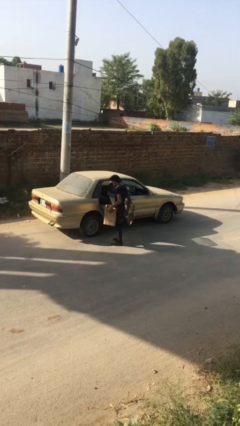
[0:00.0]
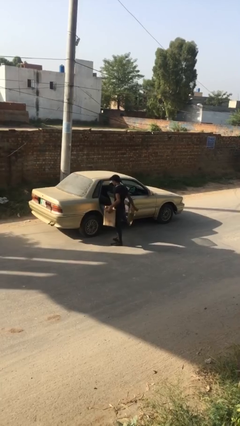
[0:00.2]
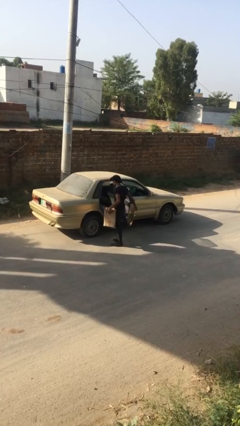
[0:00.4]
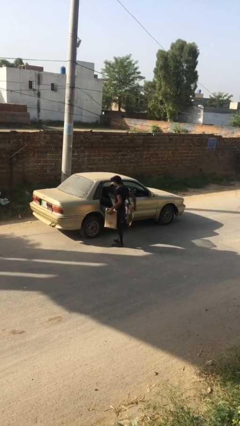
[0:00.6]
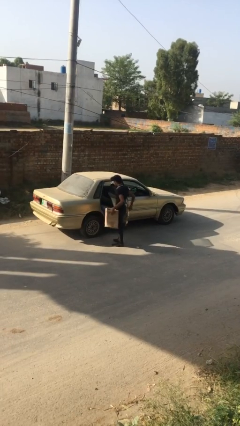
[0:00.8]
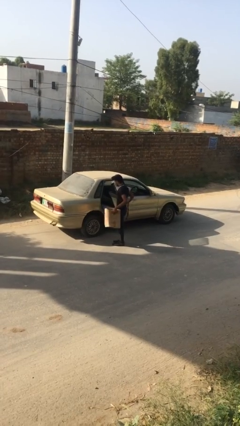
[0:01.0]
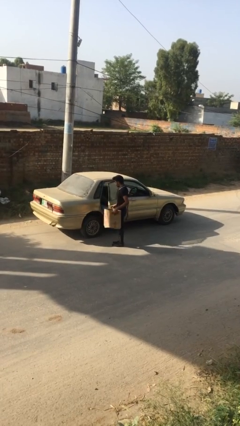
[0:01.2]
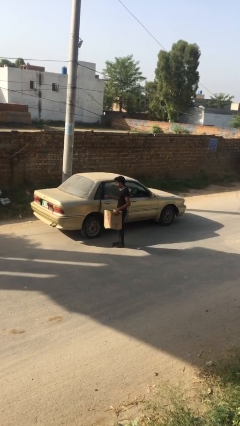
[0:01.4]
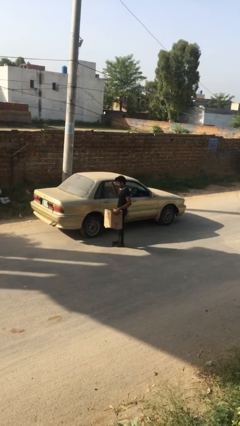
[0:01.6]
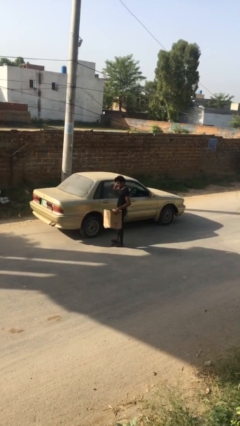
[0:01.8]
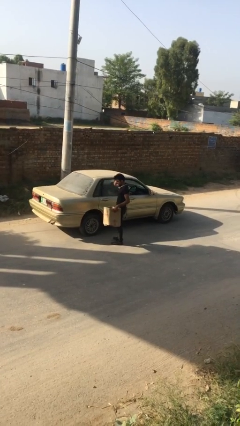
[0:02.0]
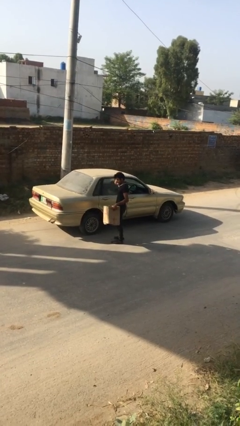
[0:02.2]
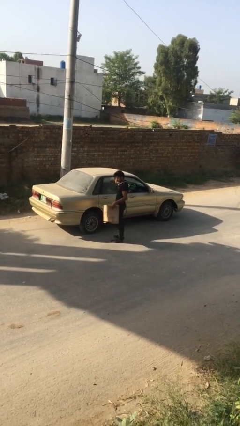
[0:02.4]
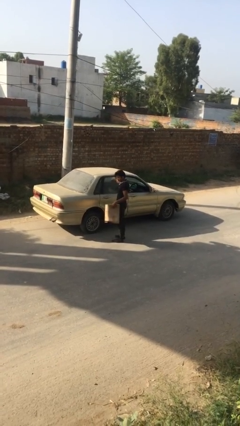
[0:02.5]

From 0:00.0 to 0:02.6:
person closes car door

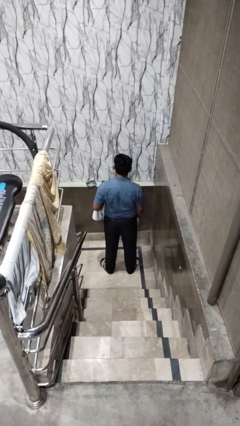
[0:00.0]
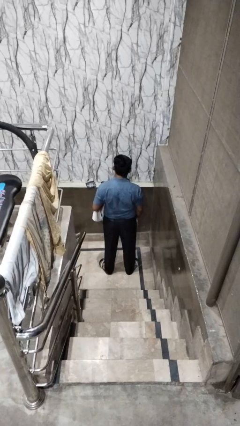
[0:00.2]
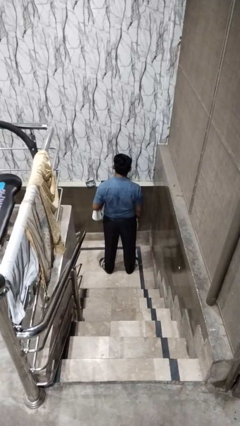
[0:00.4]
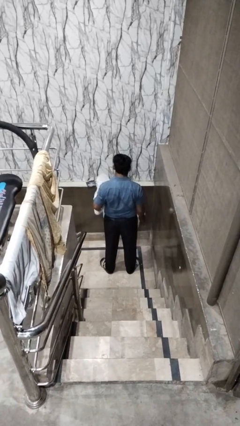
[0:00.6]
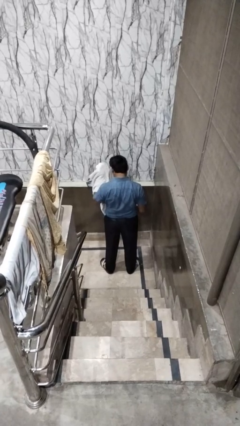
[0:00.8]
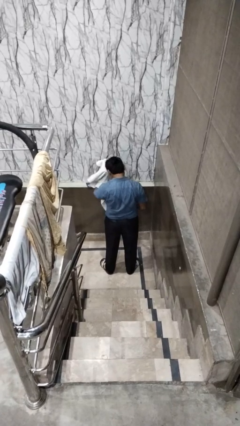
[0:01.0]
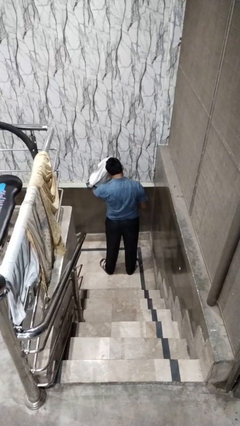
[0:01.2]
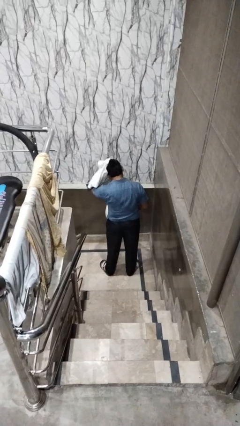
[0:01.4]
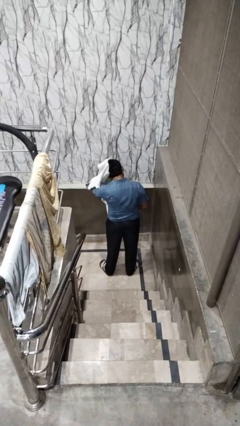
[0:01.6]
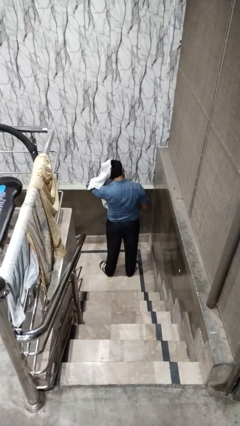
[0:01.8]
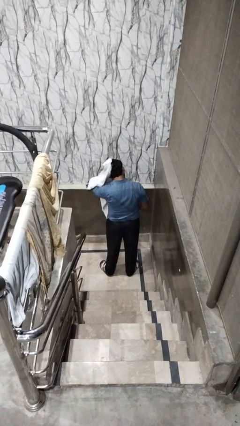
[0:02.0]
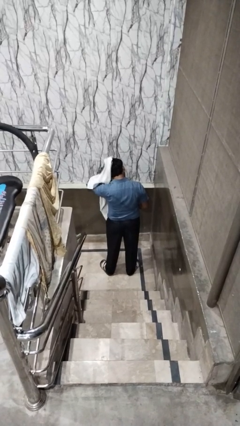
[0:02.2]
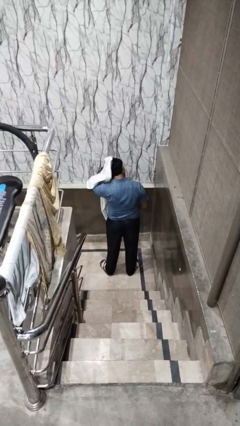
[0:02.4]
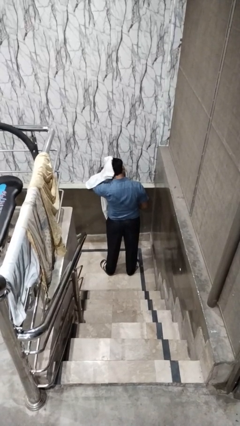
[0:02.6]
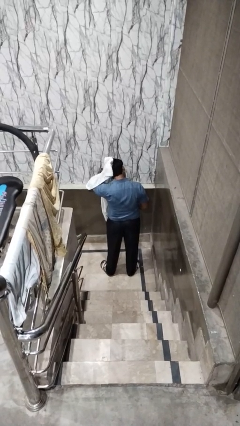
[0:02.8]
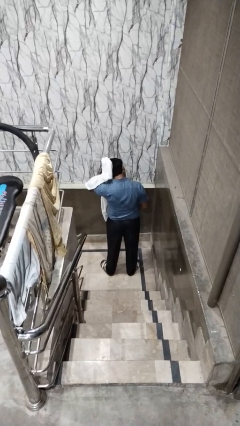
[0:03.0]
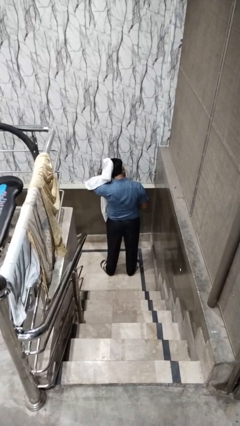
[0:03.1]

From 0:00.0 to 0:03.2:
person dries hair with towel

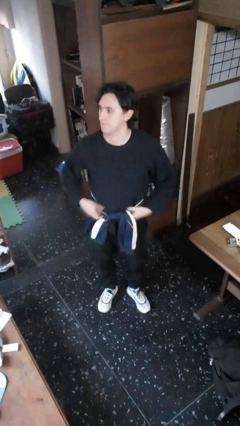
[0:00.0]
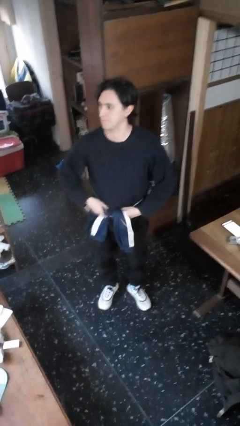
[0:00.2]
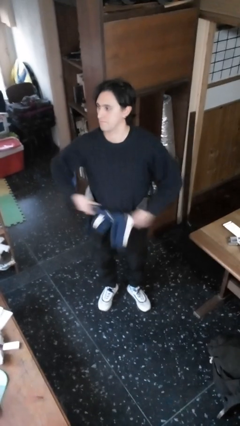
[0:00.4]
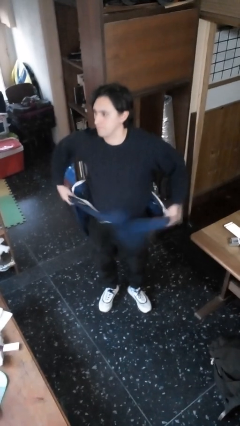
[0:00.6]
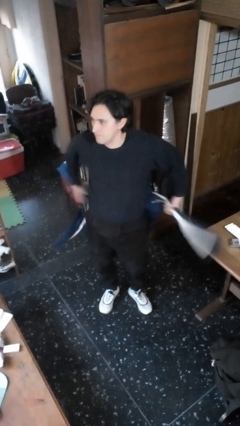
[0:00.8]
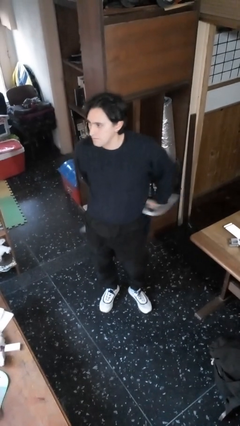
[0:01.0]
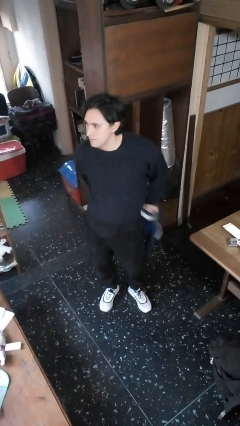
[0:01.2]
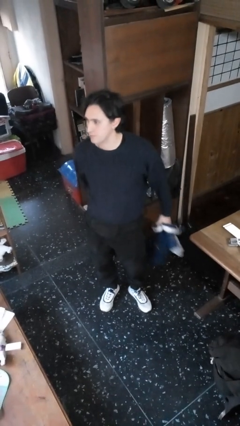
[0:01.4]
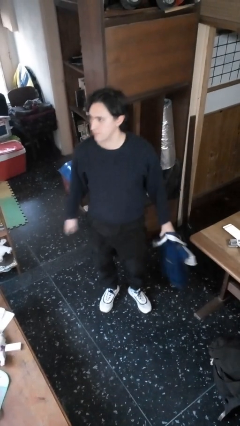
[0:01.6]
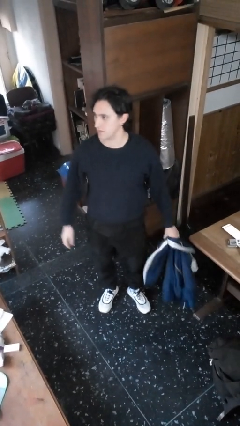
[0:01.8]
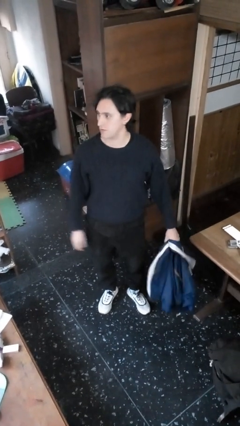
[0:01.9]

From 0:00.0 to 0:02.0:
person unties jacket around waist

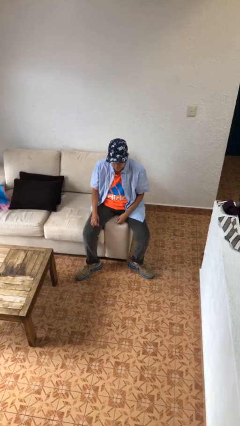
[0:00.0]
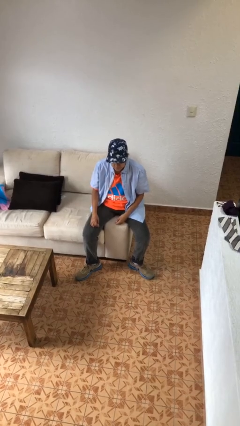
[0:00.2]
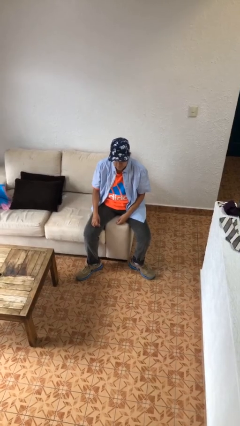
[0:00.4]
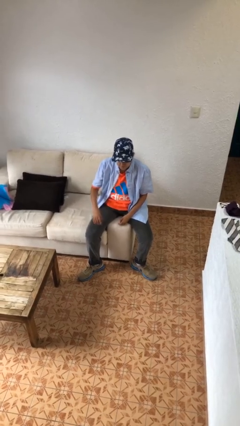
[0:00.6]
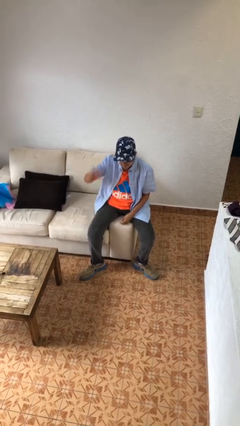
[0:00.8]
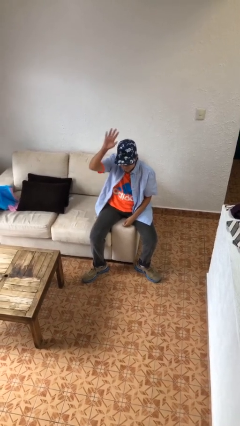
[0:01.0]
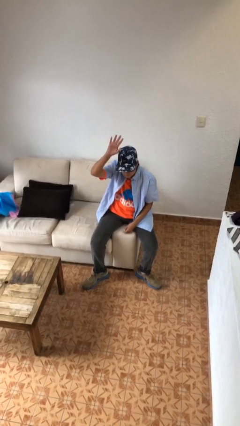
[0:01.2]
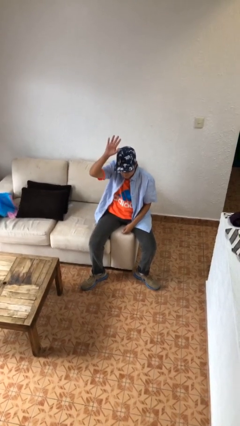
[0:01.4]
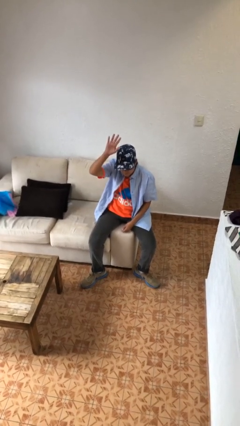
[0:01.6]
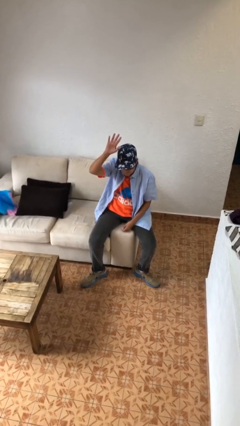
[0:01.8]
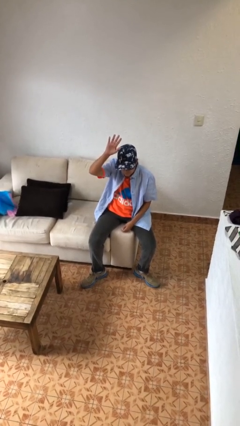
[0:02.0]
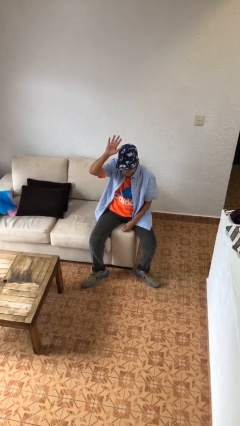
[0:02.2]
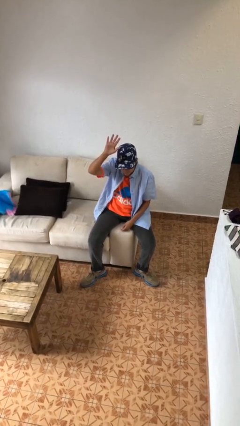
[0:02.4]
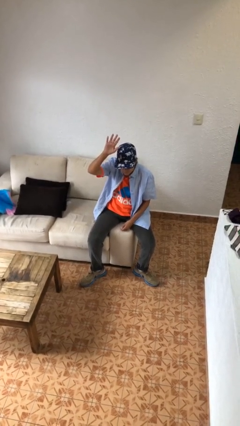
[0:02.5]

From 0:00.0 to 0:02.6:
person gestures number five

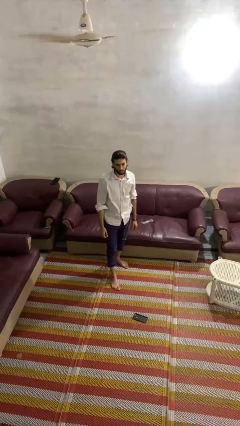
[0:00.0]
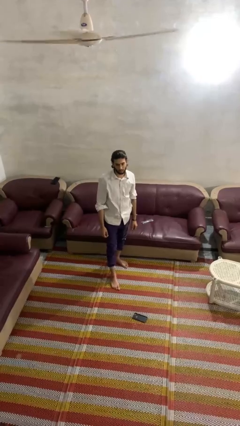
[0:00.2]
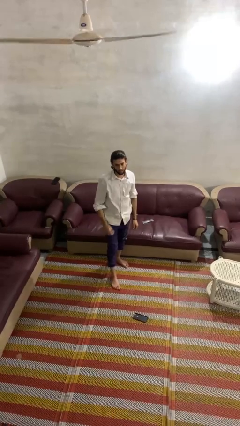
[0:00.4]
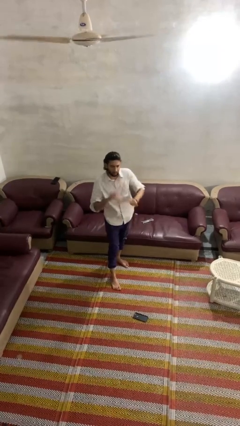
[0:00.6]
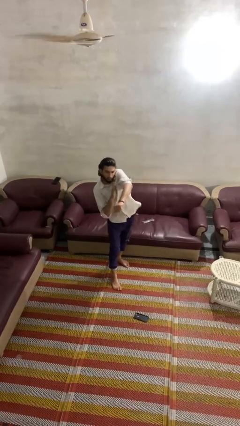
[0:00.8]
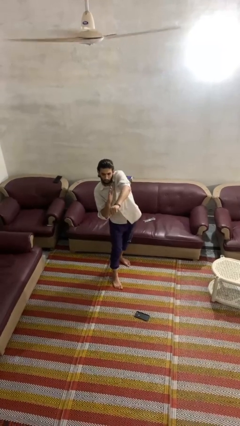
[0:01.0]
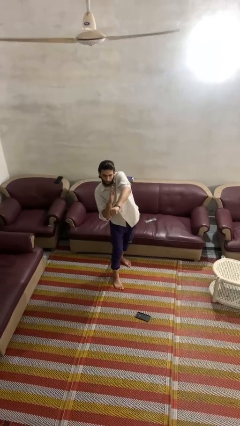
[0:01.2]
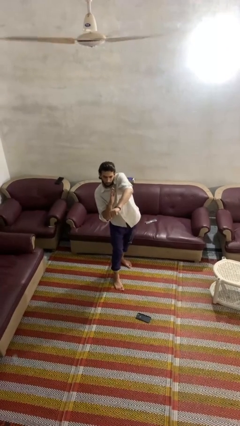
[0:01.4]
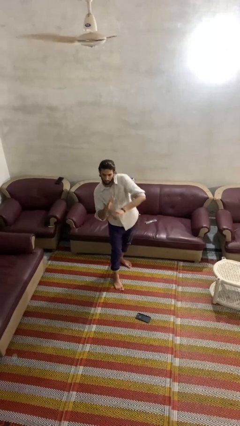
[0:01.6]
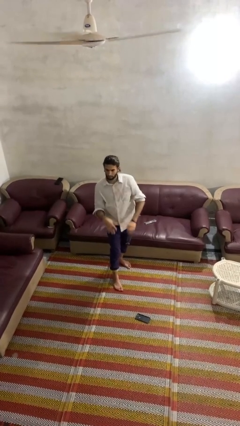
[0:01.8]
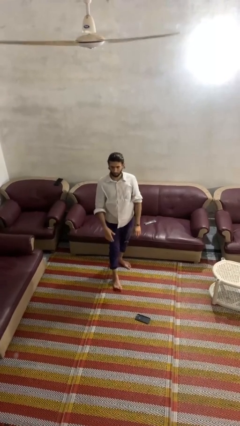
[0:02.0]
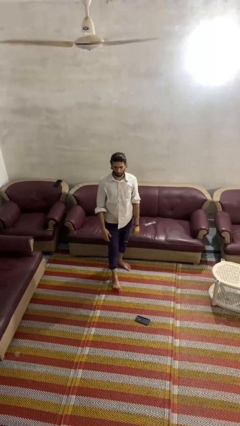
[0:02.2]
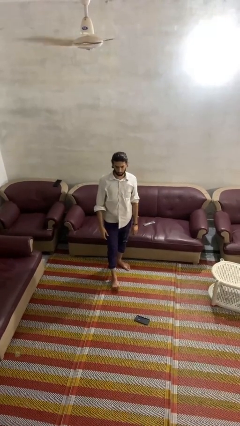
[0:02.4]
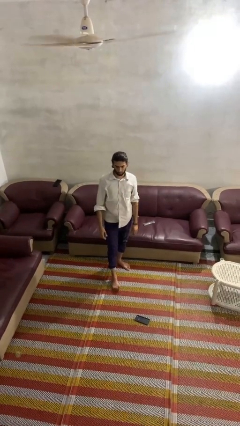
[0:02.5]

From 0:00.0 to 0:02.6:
person punches

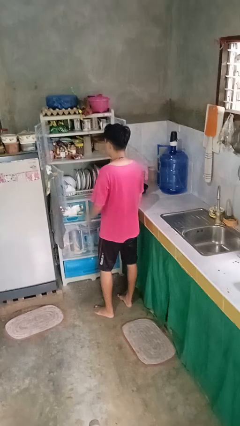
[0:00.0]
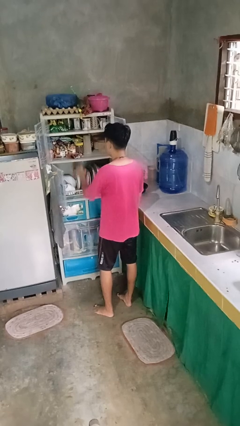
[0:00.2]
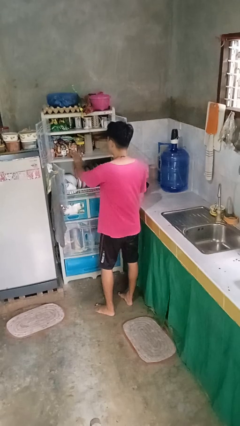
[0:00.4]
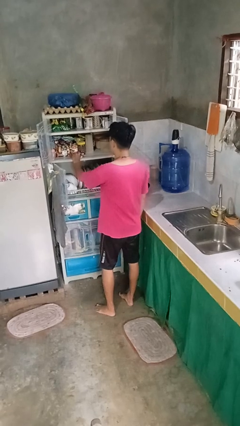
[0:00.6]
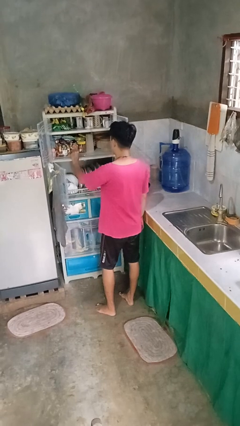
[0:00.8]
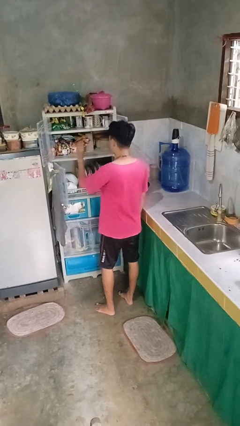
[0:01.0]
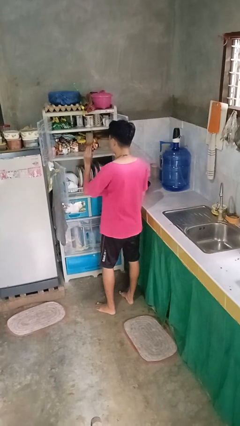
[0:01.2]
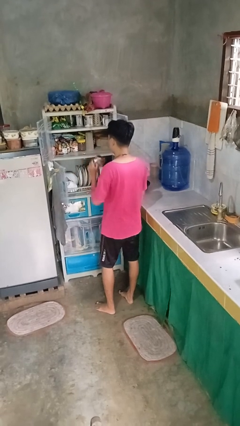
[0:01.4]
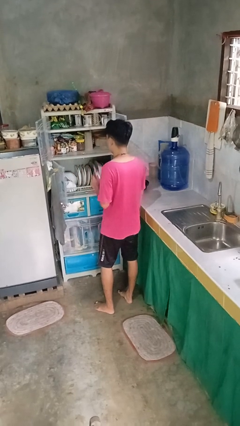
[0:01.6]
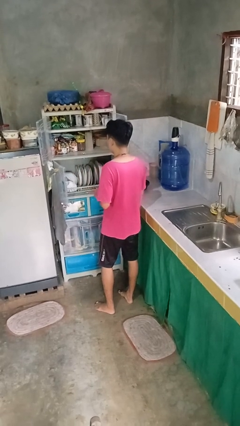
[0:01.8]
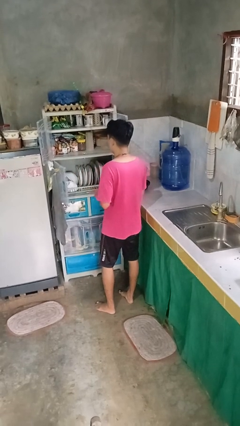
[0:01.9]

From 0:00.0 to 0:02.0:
person takes object from cabinet

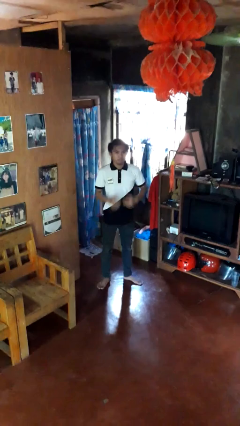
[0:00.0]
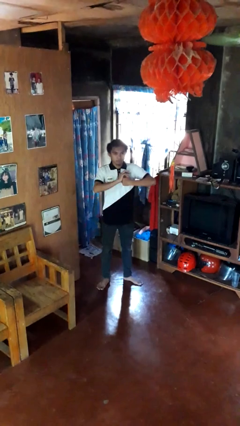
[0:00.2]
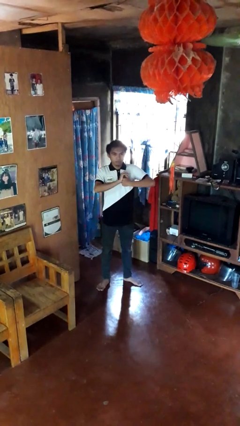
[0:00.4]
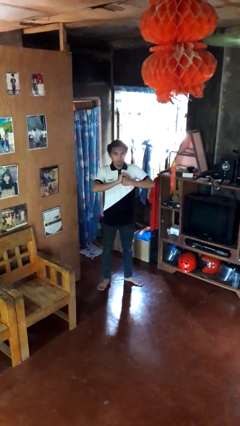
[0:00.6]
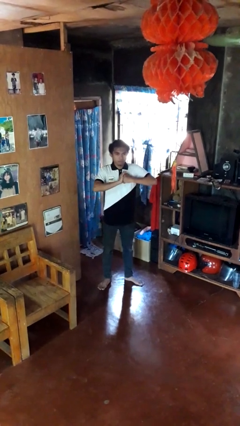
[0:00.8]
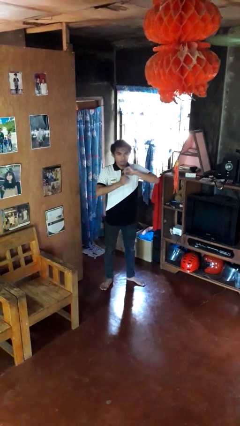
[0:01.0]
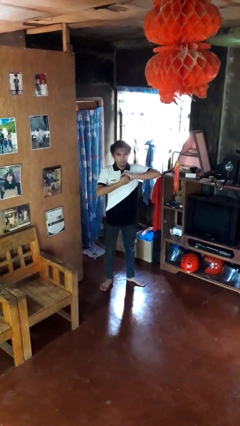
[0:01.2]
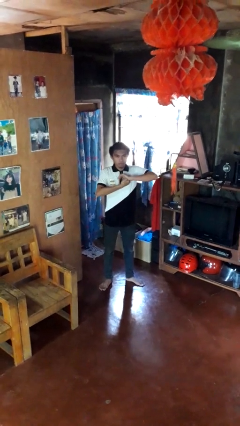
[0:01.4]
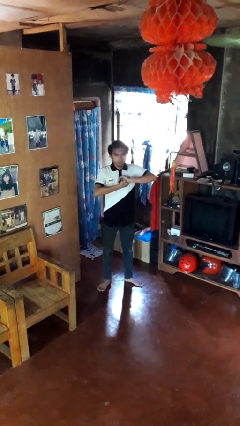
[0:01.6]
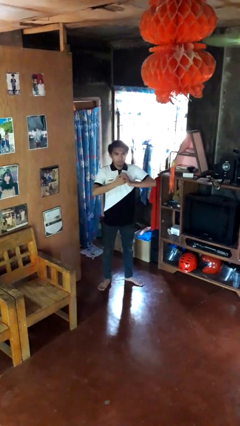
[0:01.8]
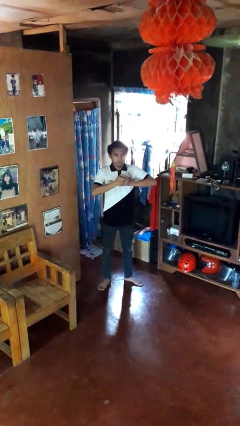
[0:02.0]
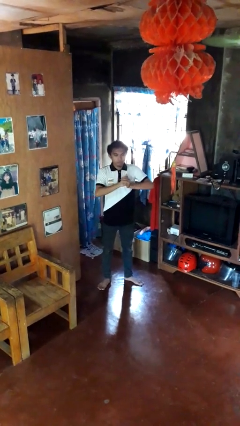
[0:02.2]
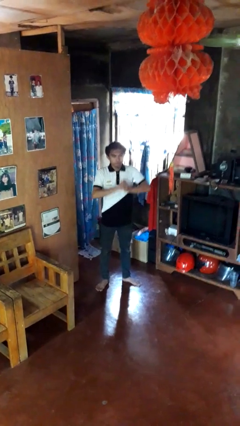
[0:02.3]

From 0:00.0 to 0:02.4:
person cracks knuckles
